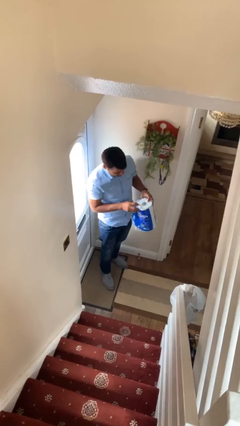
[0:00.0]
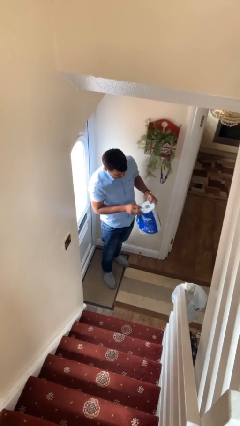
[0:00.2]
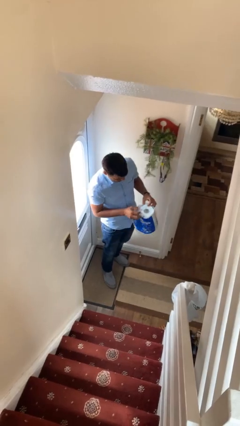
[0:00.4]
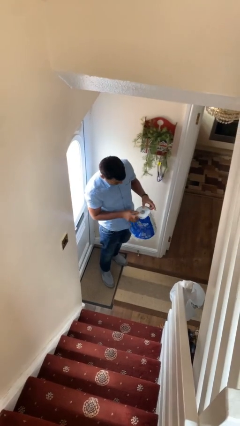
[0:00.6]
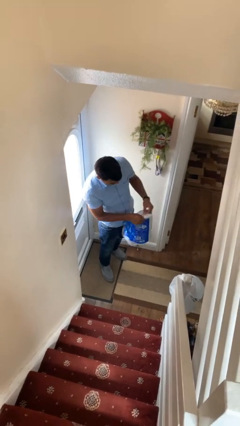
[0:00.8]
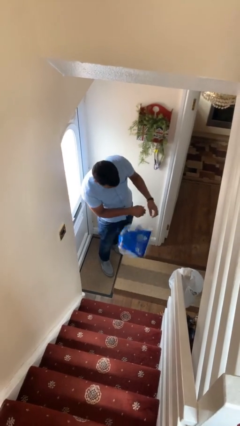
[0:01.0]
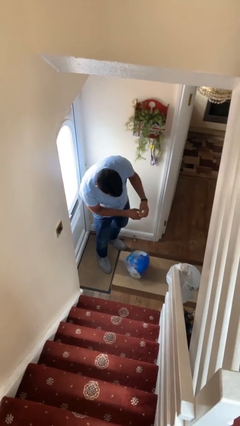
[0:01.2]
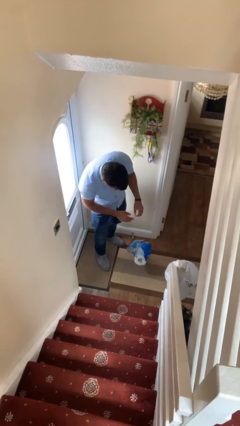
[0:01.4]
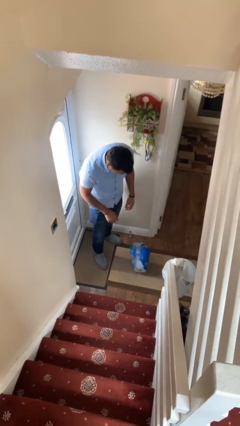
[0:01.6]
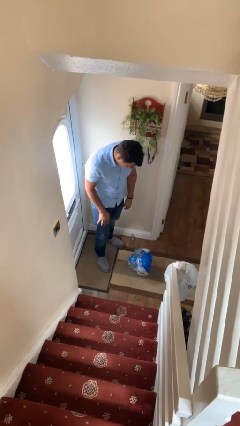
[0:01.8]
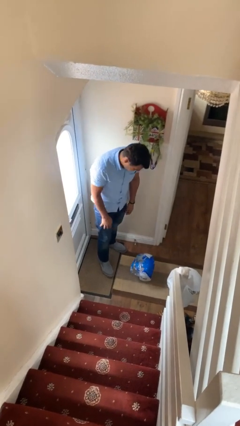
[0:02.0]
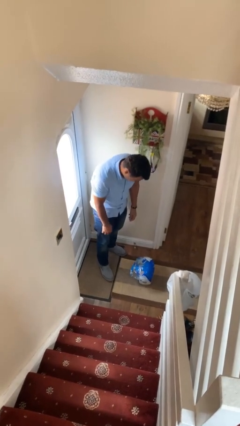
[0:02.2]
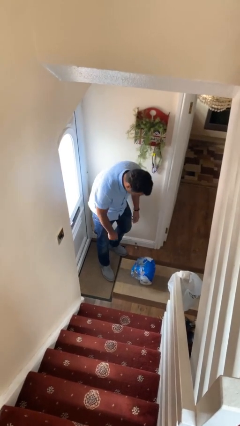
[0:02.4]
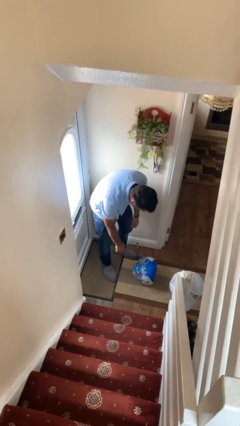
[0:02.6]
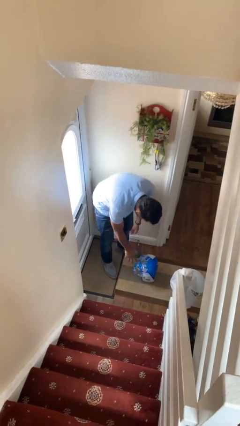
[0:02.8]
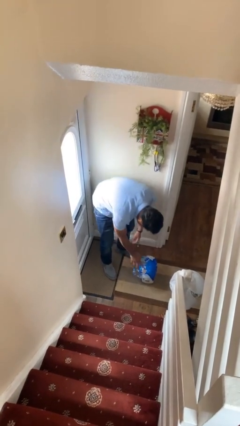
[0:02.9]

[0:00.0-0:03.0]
person drops object

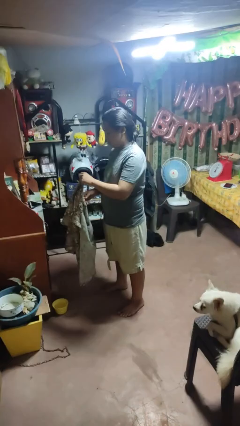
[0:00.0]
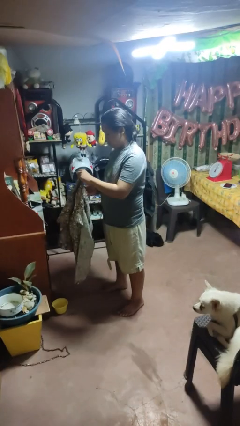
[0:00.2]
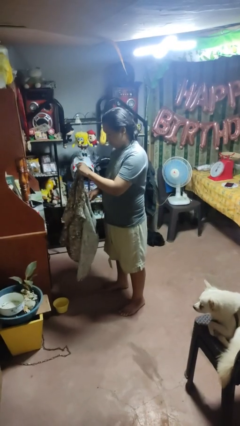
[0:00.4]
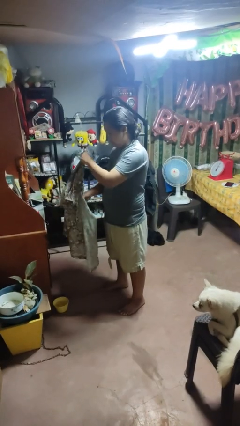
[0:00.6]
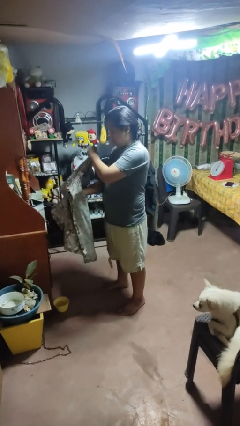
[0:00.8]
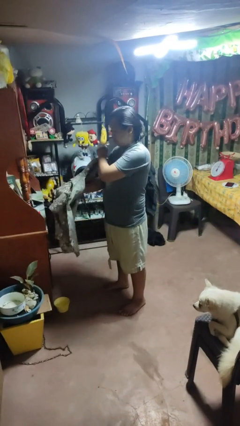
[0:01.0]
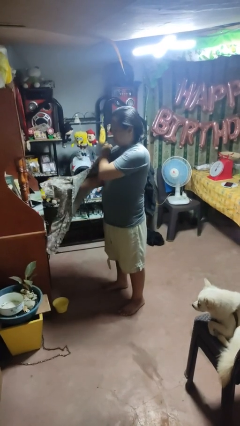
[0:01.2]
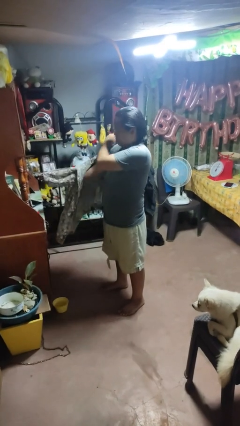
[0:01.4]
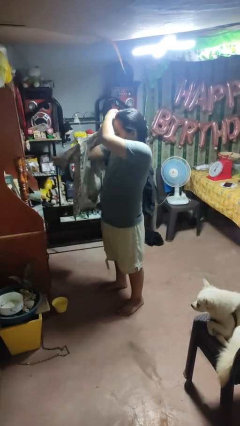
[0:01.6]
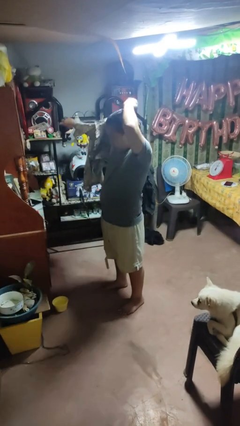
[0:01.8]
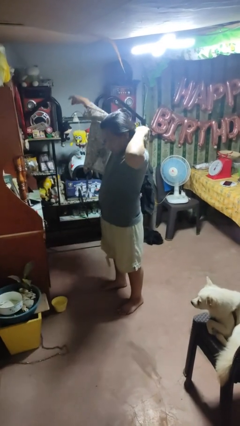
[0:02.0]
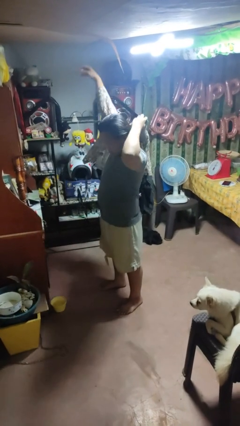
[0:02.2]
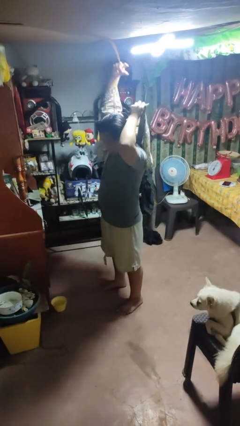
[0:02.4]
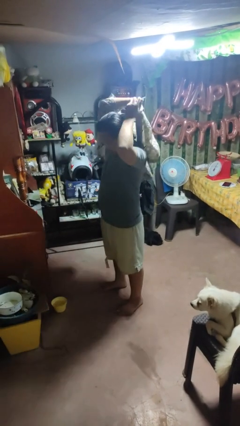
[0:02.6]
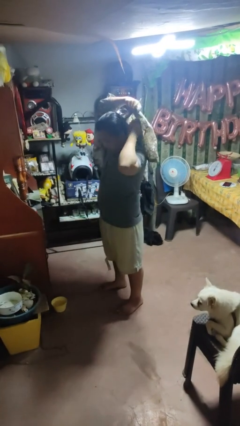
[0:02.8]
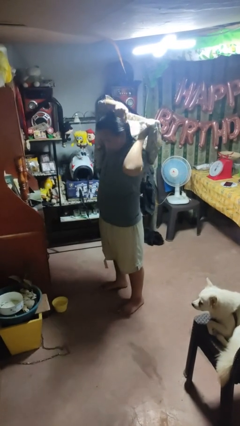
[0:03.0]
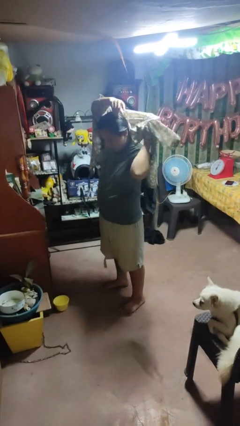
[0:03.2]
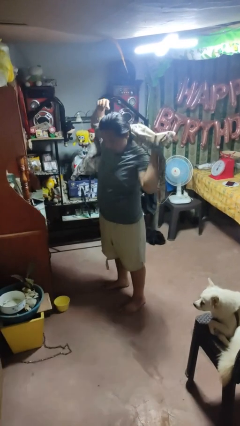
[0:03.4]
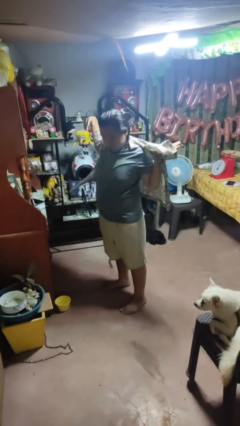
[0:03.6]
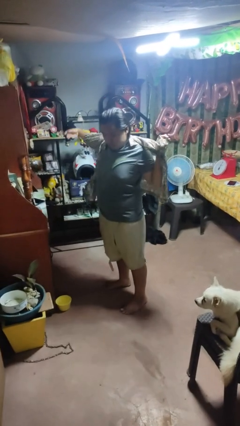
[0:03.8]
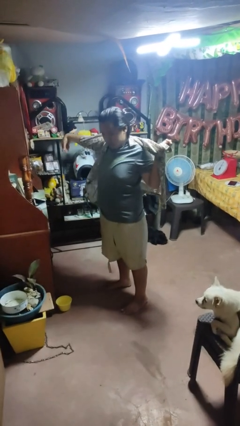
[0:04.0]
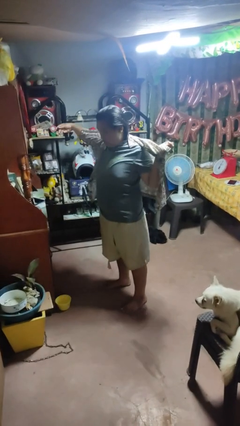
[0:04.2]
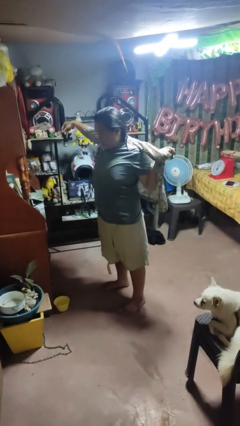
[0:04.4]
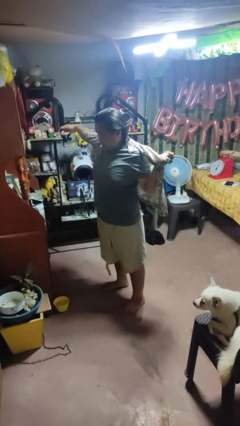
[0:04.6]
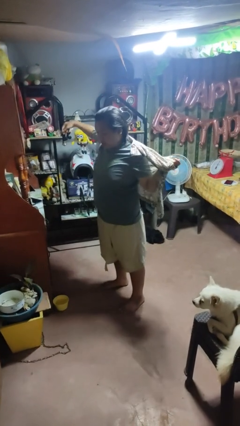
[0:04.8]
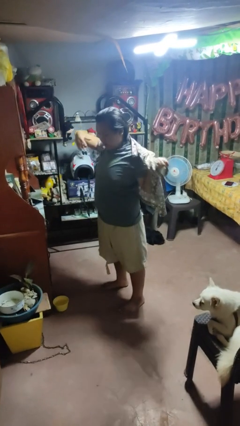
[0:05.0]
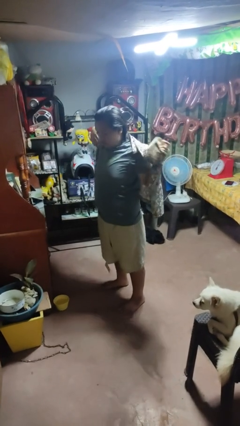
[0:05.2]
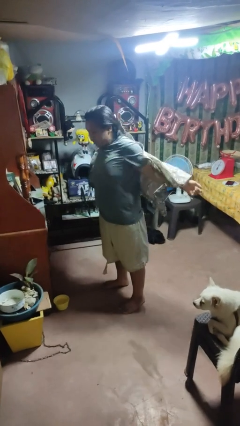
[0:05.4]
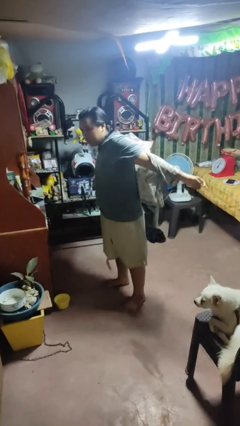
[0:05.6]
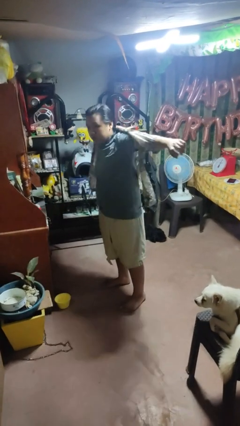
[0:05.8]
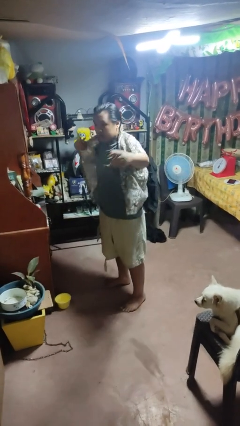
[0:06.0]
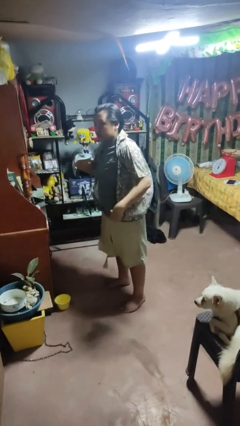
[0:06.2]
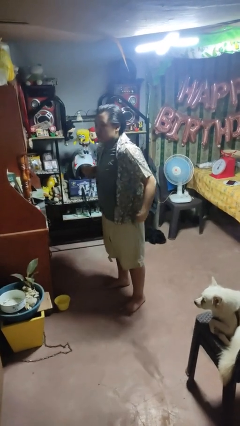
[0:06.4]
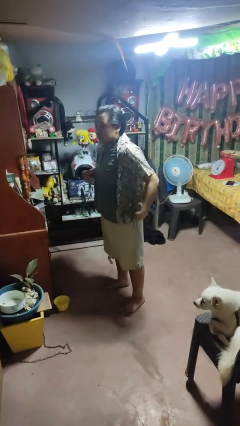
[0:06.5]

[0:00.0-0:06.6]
person puts on shirt

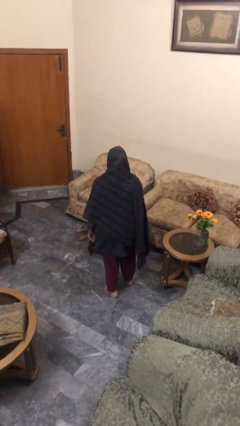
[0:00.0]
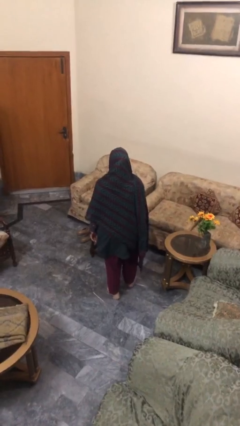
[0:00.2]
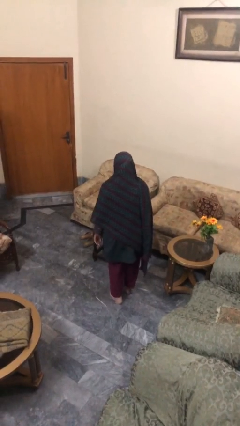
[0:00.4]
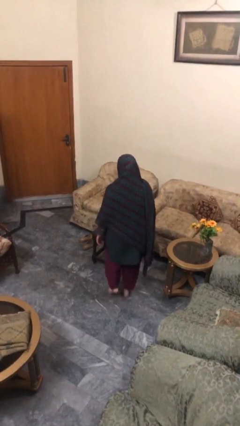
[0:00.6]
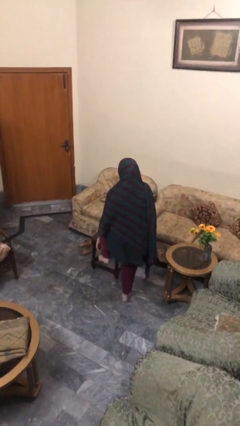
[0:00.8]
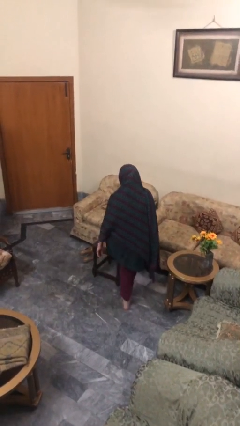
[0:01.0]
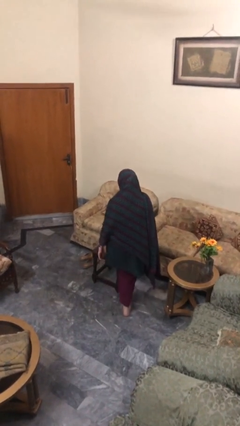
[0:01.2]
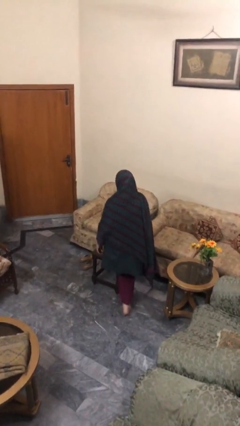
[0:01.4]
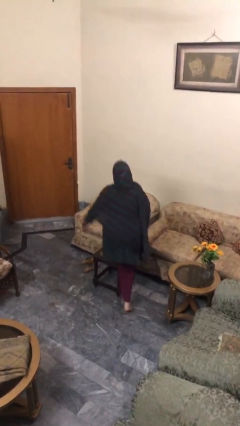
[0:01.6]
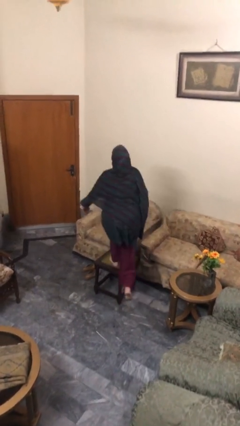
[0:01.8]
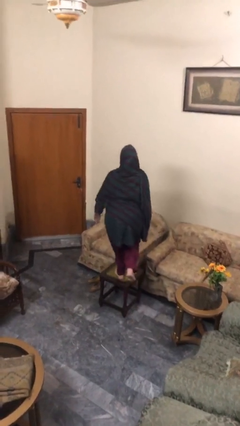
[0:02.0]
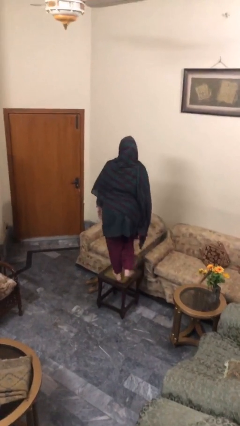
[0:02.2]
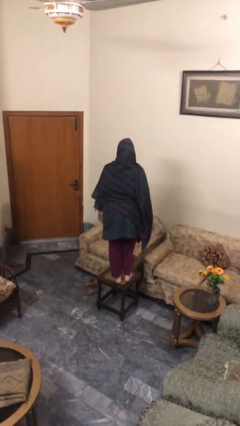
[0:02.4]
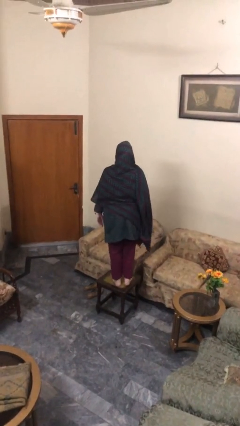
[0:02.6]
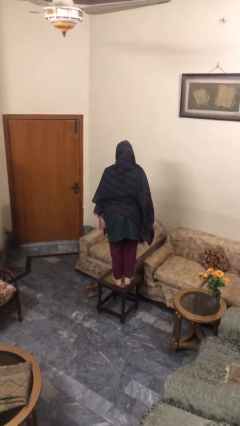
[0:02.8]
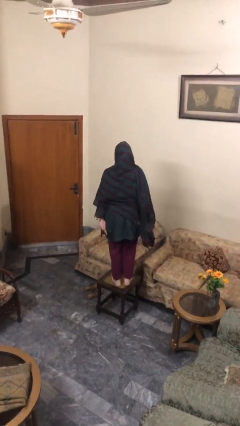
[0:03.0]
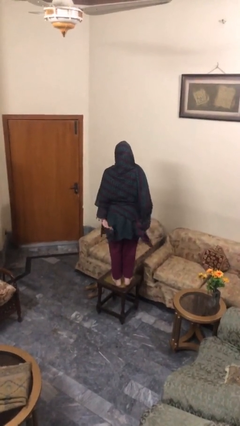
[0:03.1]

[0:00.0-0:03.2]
person climbs on table

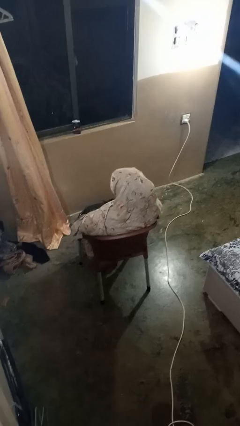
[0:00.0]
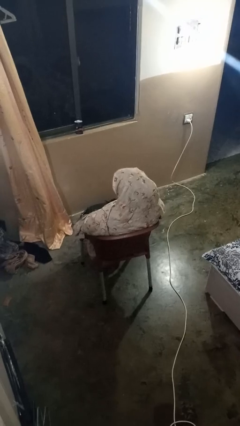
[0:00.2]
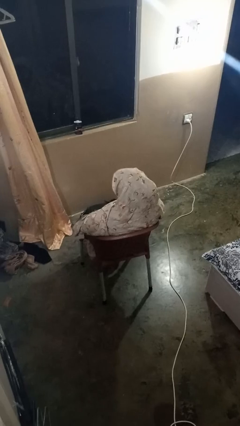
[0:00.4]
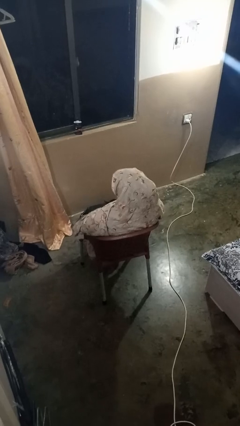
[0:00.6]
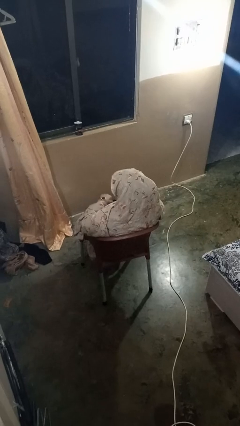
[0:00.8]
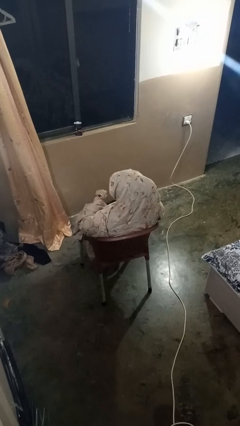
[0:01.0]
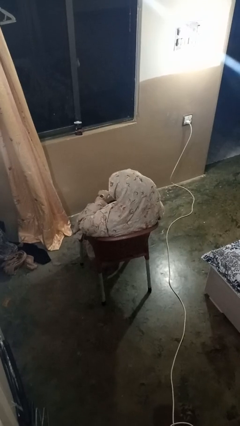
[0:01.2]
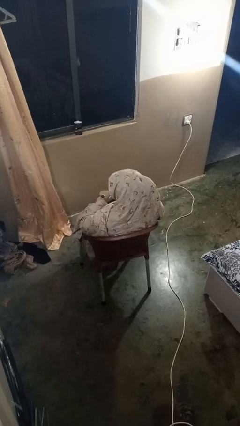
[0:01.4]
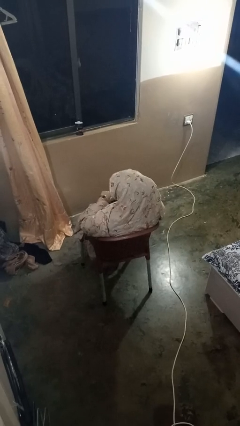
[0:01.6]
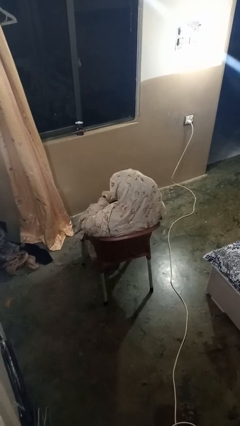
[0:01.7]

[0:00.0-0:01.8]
person looks at wristwatch

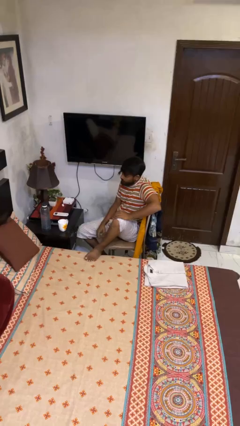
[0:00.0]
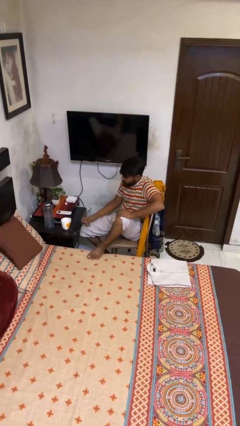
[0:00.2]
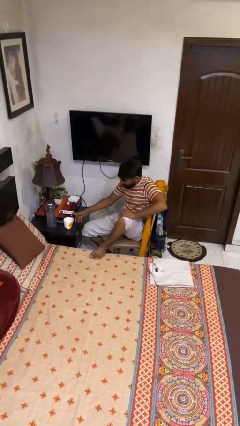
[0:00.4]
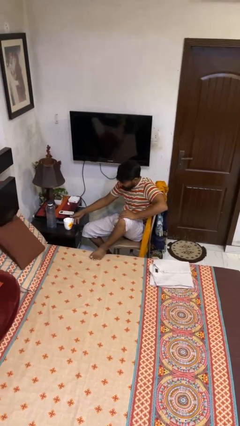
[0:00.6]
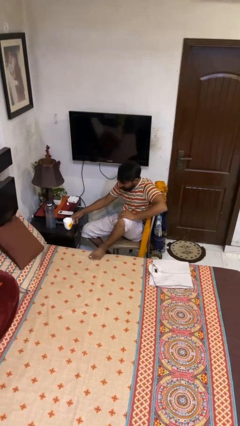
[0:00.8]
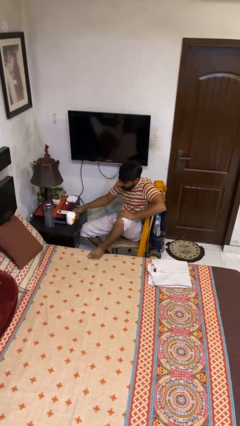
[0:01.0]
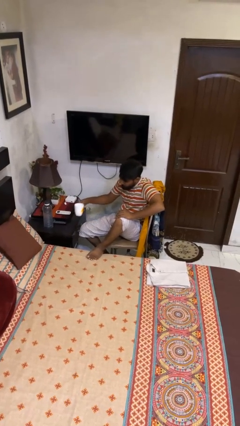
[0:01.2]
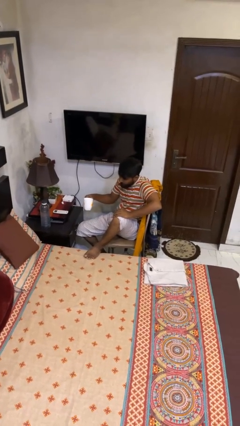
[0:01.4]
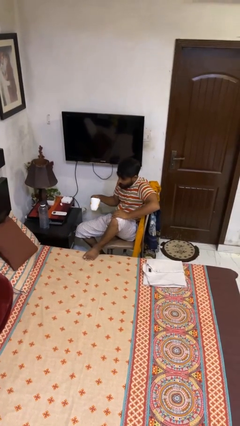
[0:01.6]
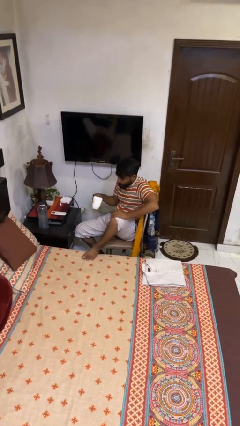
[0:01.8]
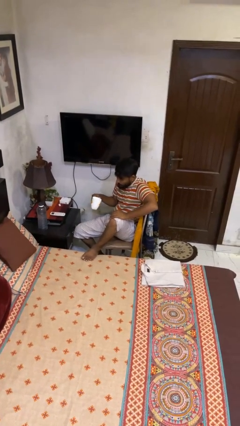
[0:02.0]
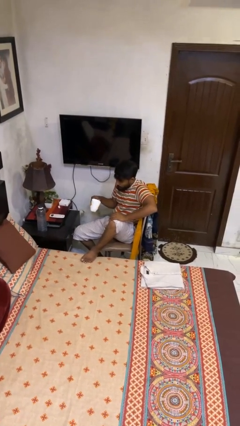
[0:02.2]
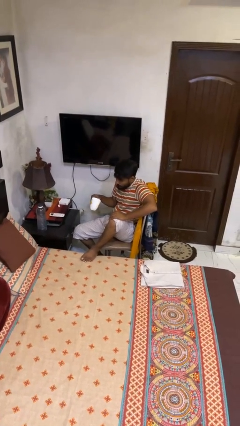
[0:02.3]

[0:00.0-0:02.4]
person picks up object from table

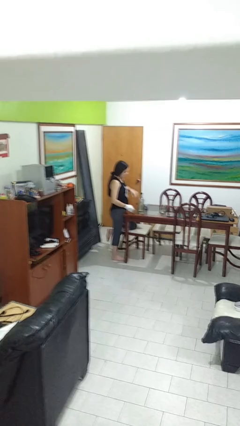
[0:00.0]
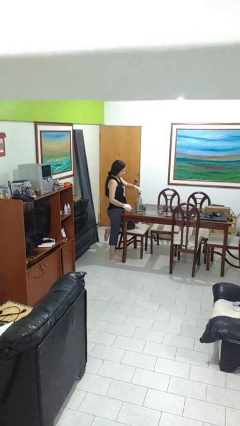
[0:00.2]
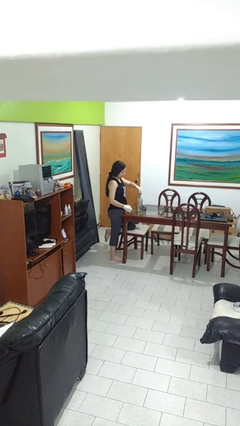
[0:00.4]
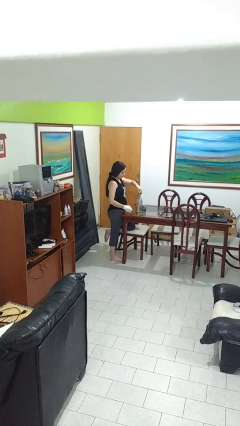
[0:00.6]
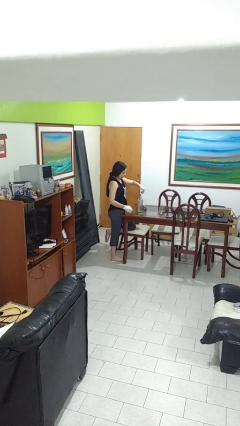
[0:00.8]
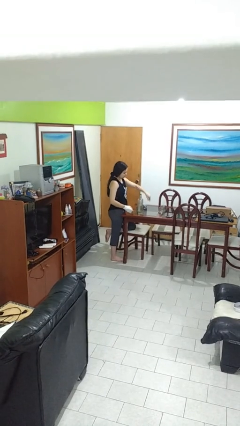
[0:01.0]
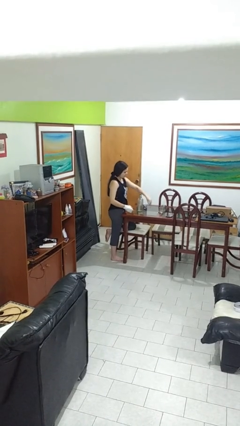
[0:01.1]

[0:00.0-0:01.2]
person unscrews lid from bottle
